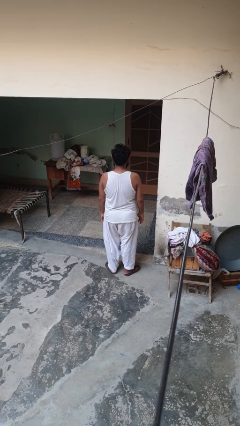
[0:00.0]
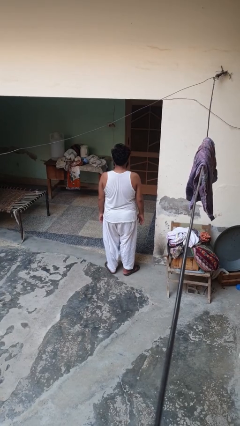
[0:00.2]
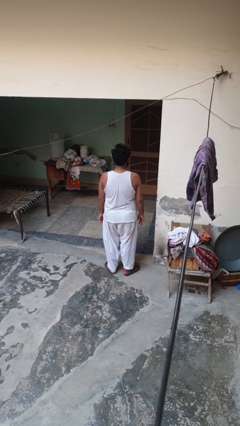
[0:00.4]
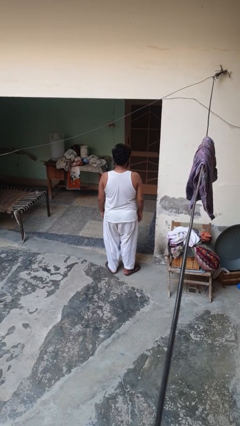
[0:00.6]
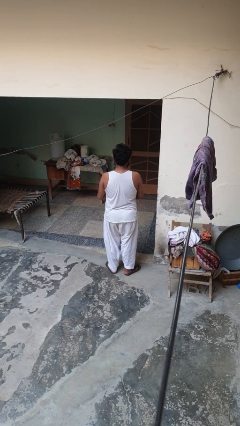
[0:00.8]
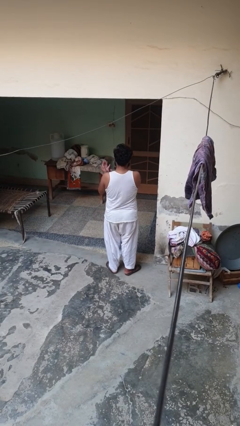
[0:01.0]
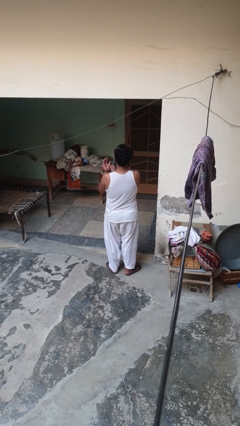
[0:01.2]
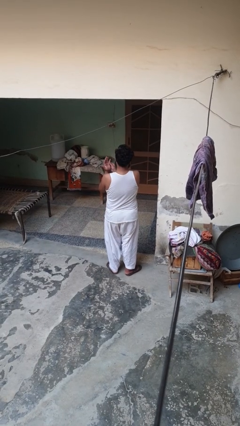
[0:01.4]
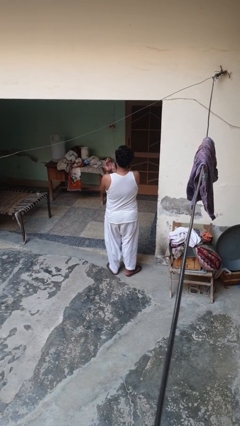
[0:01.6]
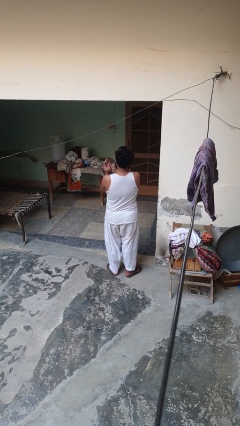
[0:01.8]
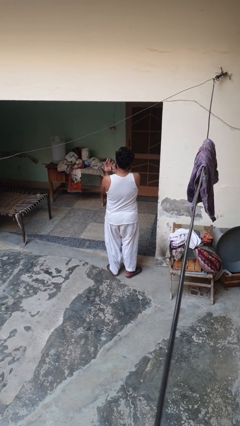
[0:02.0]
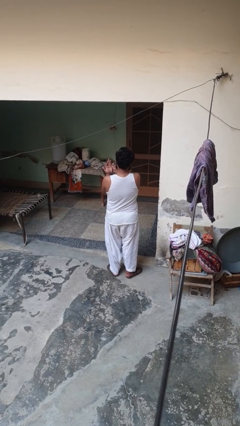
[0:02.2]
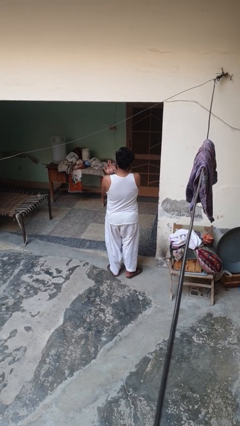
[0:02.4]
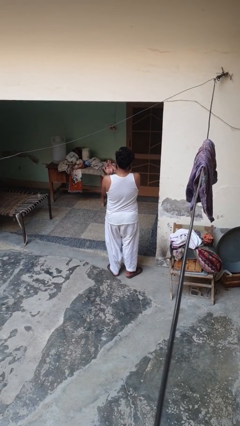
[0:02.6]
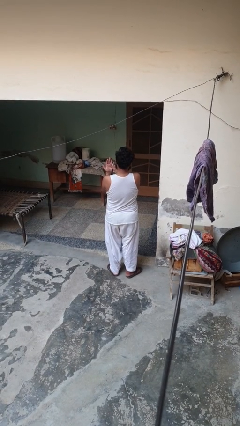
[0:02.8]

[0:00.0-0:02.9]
person snaps fingers

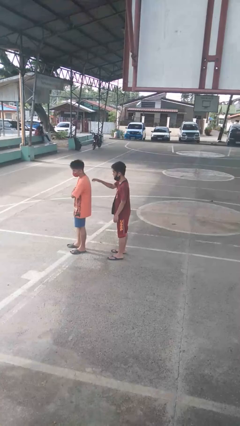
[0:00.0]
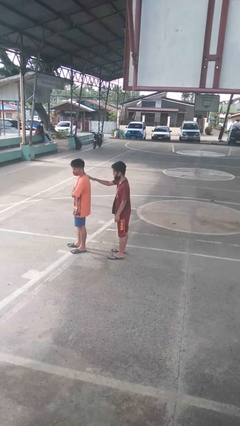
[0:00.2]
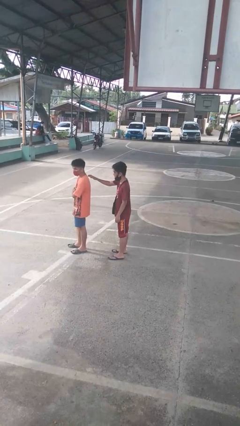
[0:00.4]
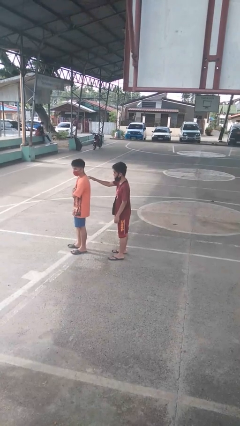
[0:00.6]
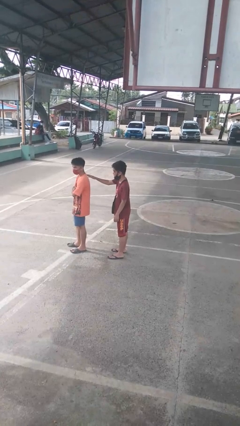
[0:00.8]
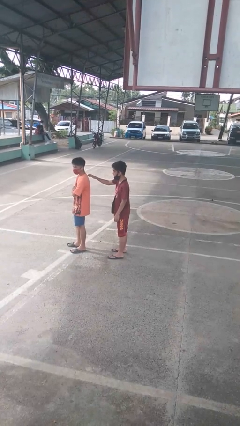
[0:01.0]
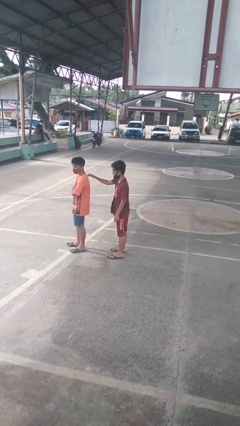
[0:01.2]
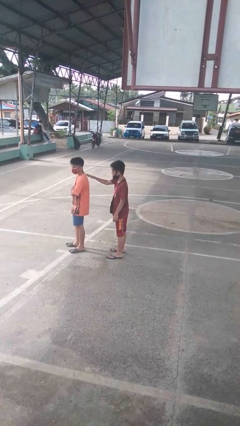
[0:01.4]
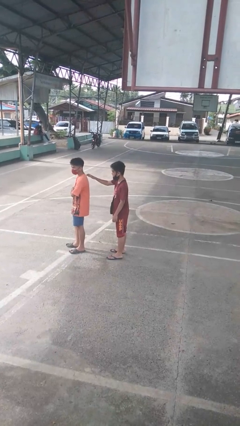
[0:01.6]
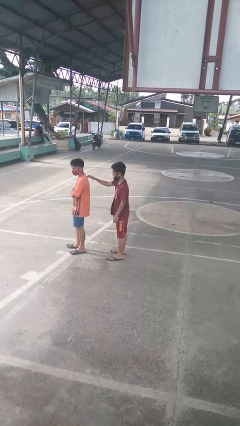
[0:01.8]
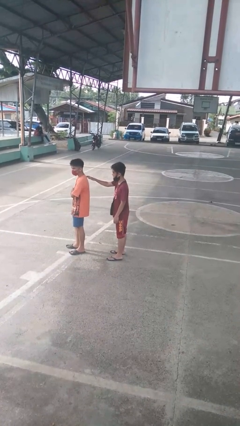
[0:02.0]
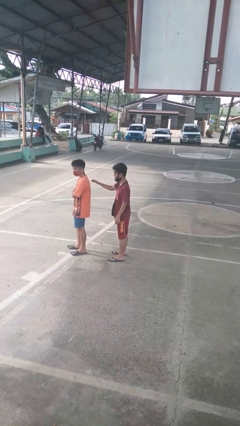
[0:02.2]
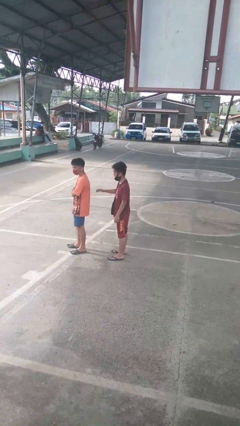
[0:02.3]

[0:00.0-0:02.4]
person touches back of person

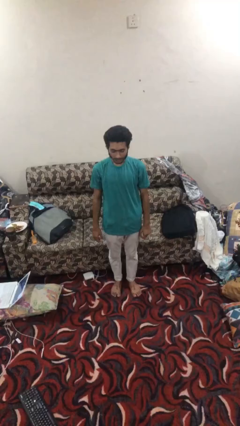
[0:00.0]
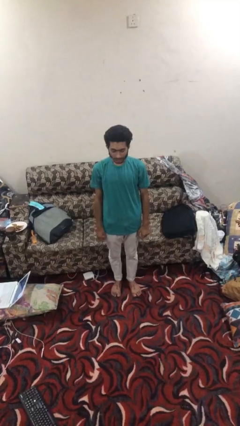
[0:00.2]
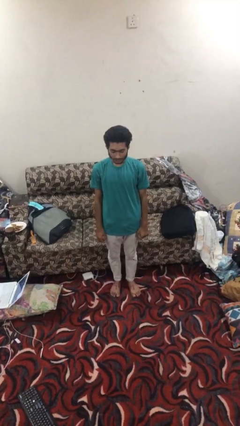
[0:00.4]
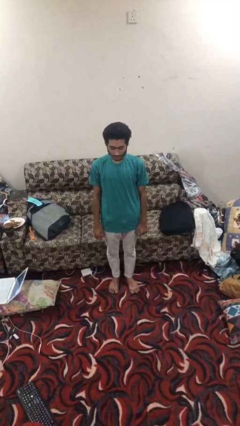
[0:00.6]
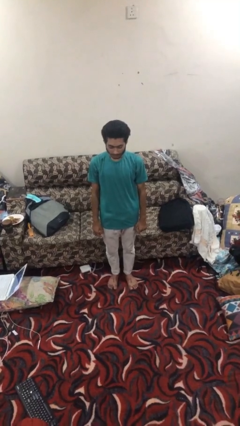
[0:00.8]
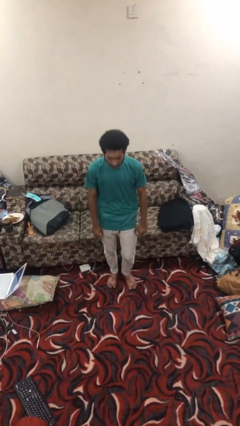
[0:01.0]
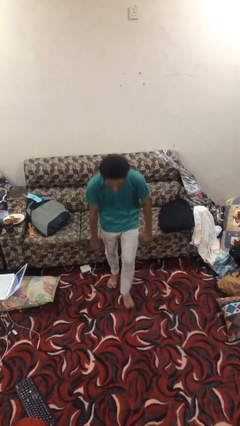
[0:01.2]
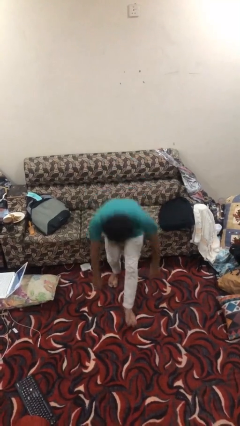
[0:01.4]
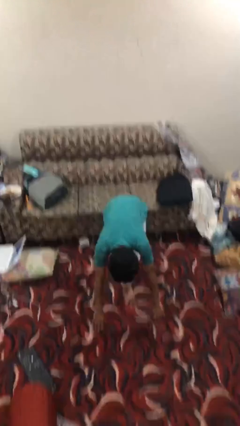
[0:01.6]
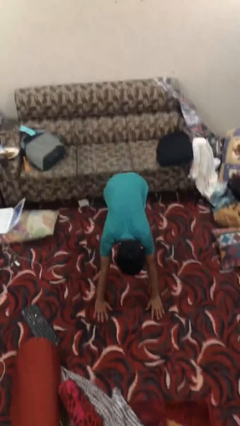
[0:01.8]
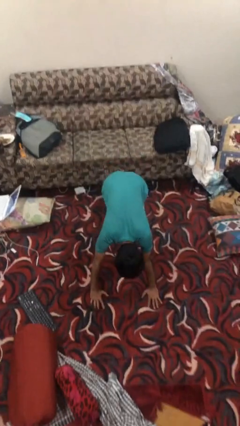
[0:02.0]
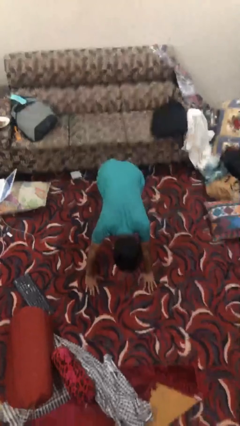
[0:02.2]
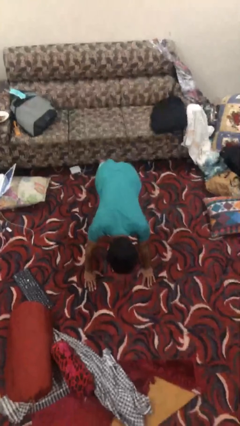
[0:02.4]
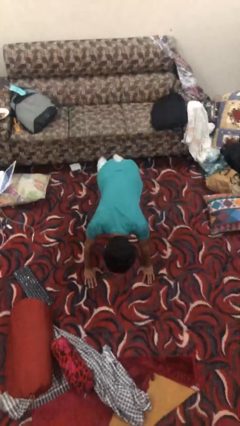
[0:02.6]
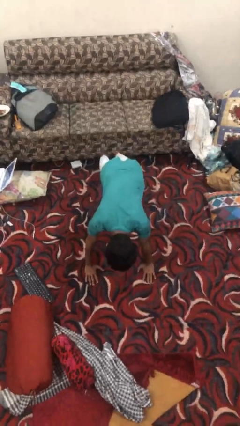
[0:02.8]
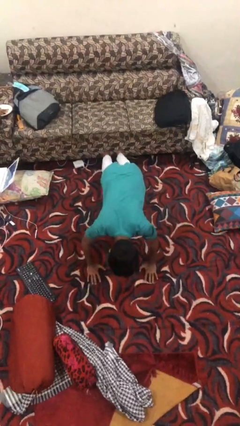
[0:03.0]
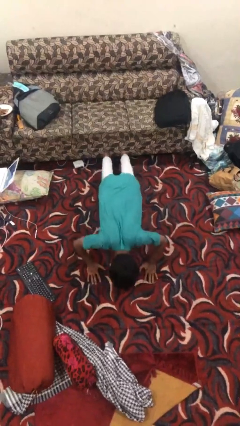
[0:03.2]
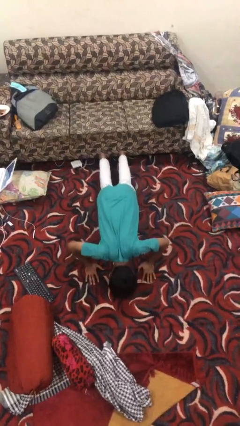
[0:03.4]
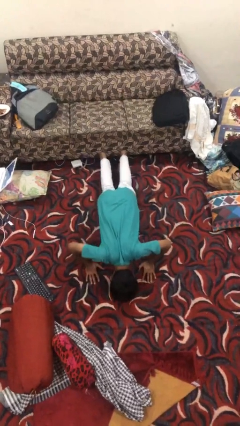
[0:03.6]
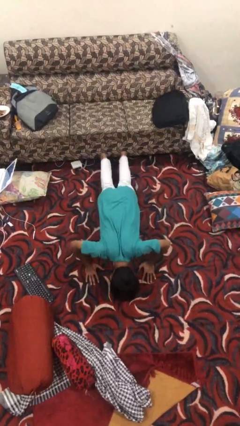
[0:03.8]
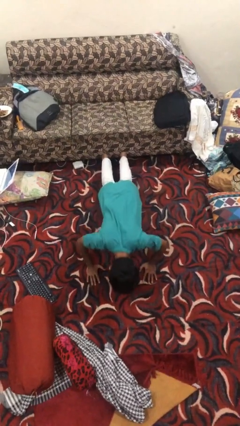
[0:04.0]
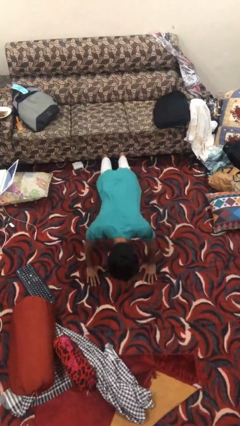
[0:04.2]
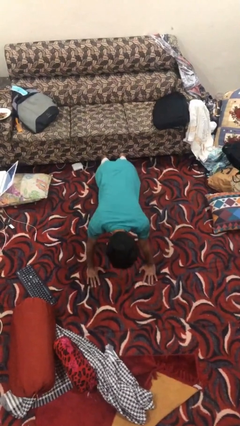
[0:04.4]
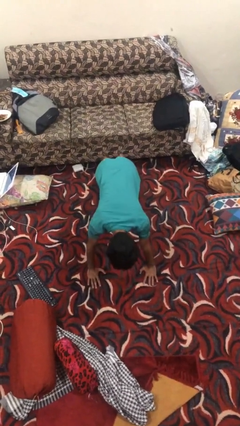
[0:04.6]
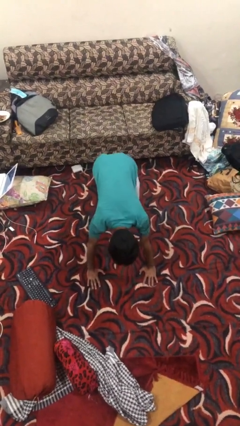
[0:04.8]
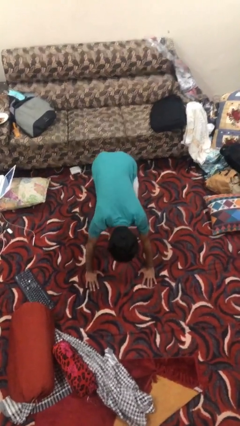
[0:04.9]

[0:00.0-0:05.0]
person exercises with pushup

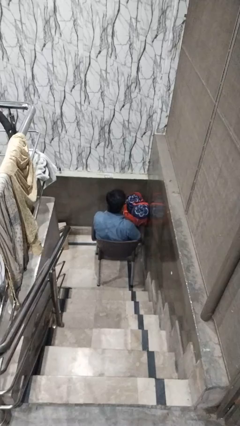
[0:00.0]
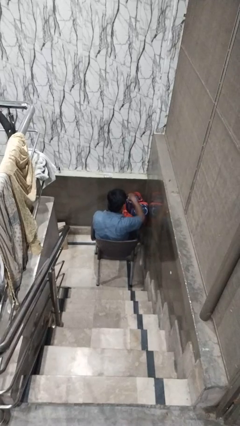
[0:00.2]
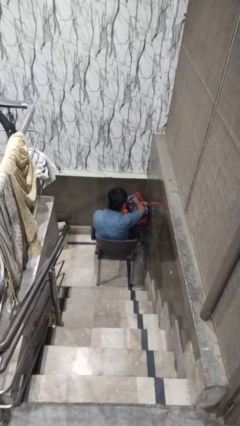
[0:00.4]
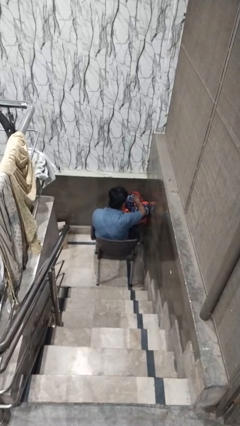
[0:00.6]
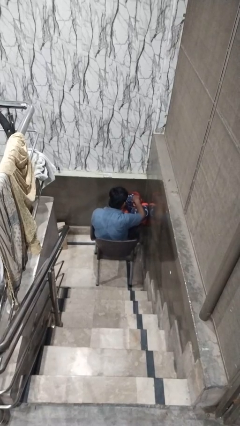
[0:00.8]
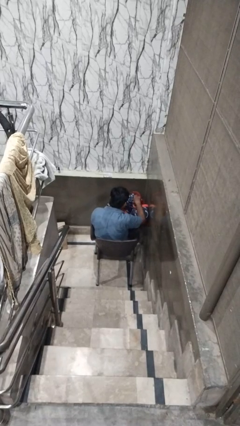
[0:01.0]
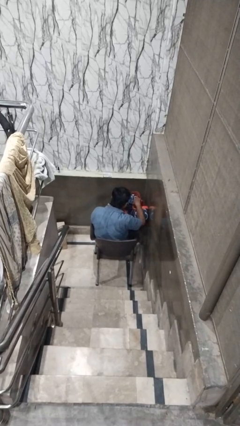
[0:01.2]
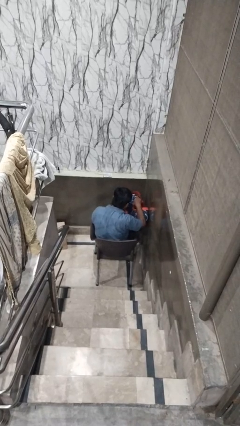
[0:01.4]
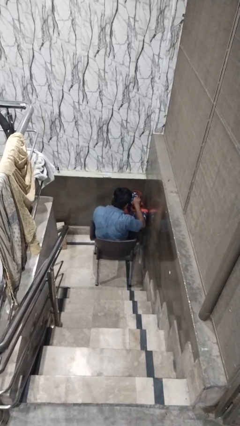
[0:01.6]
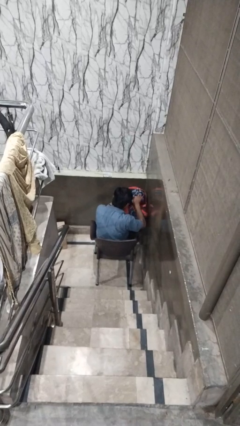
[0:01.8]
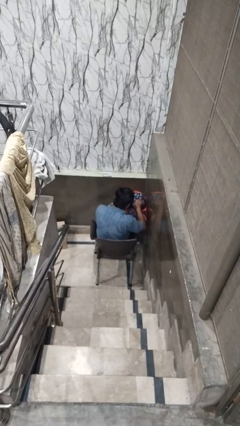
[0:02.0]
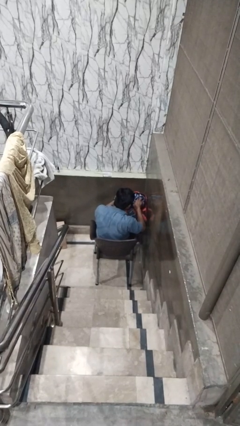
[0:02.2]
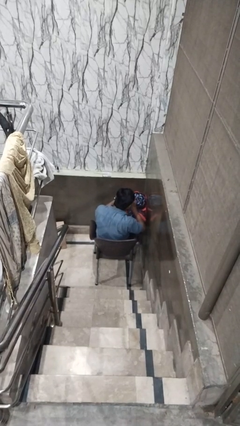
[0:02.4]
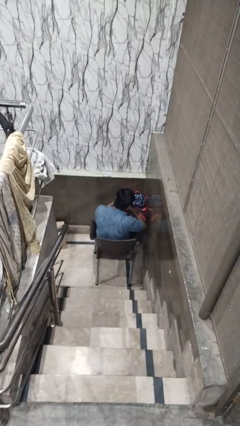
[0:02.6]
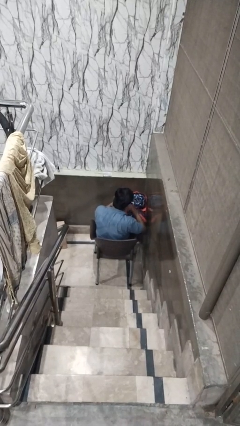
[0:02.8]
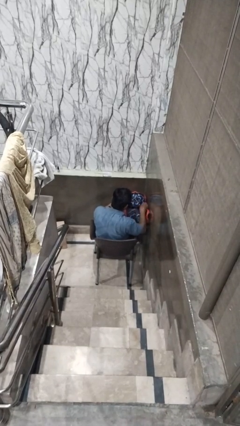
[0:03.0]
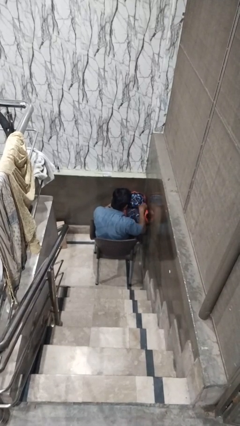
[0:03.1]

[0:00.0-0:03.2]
person searches in bag

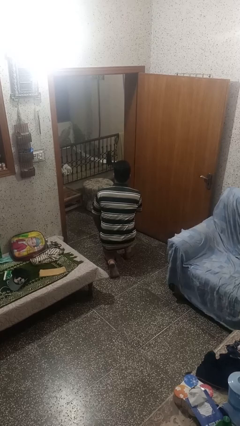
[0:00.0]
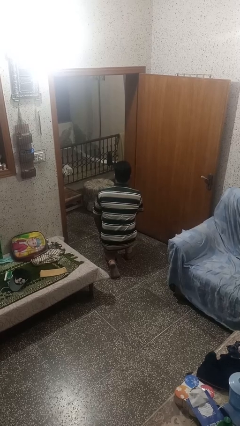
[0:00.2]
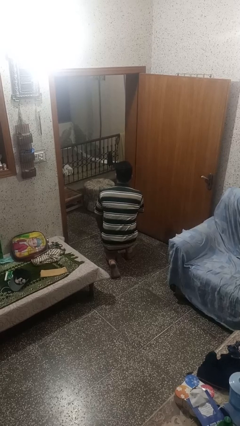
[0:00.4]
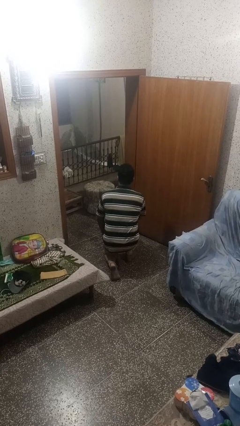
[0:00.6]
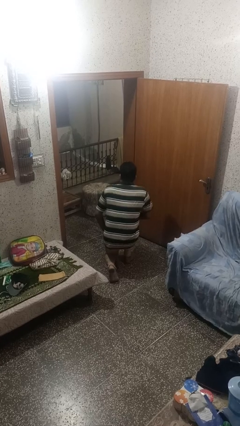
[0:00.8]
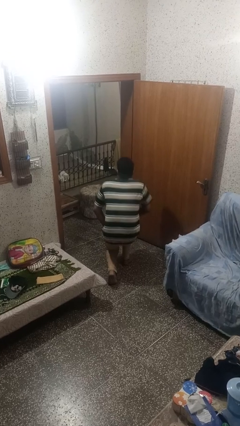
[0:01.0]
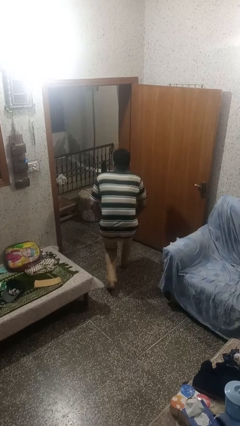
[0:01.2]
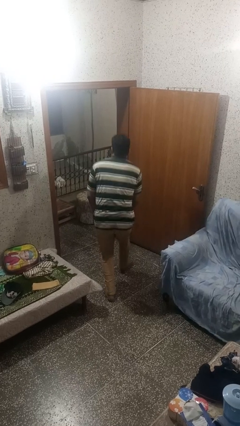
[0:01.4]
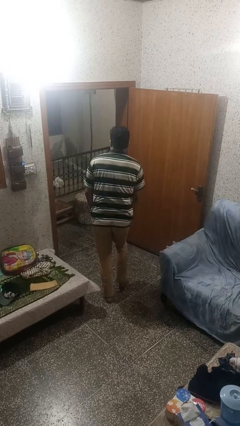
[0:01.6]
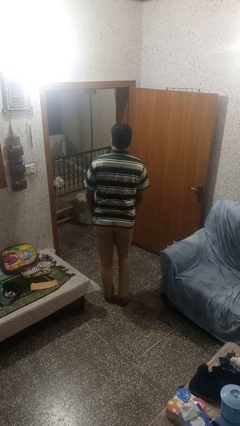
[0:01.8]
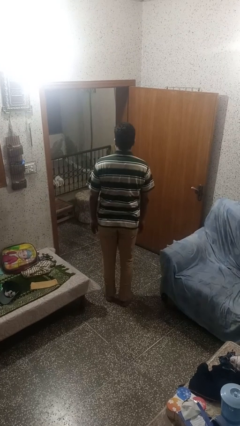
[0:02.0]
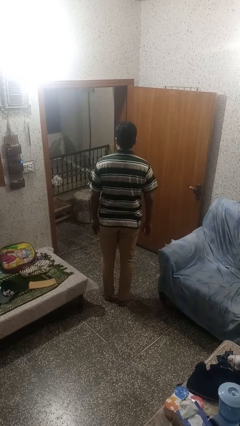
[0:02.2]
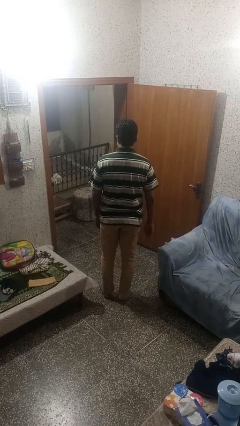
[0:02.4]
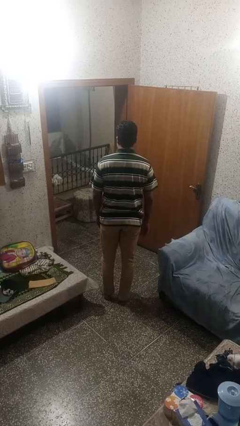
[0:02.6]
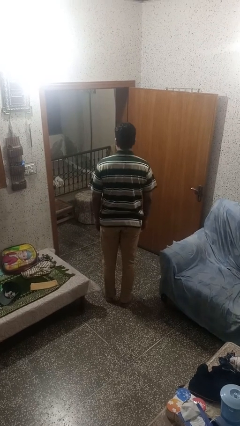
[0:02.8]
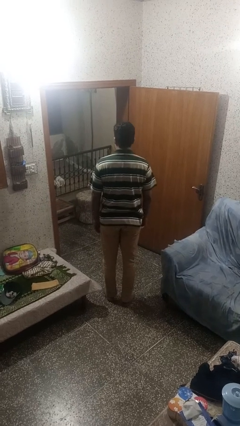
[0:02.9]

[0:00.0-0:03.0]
person stands up from floor

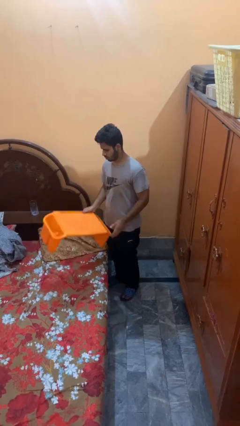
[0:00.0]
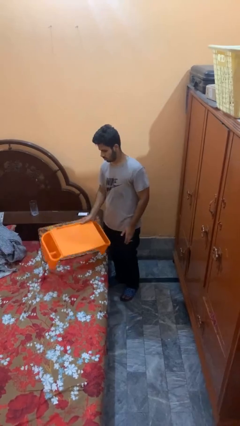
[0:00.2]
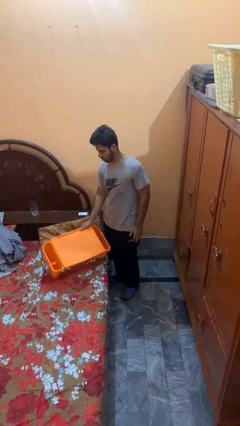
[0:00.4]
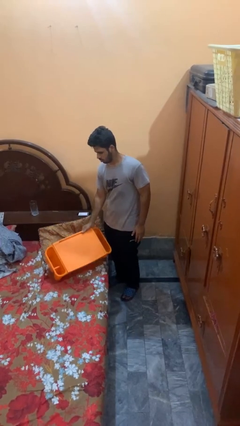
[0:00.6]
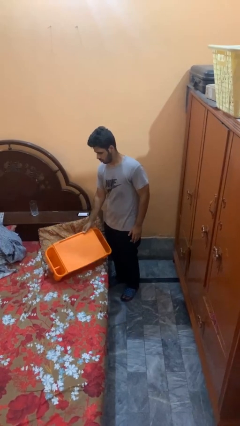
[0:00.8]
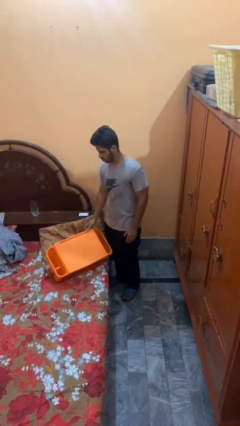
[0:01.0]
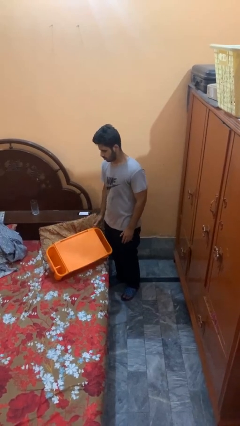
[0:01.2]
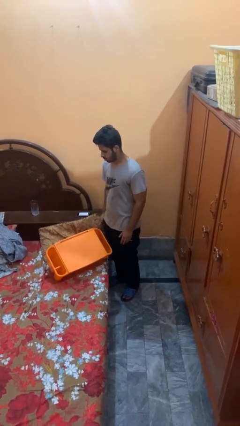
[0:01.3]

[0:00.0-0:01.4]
person puts down object on bed
